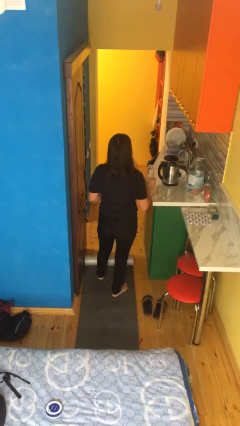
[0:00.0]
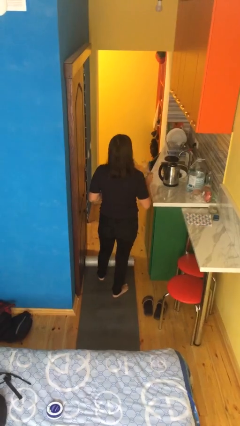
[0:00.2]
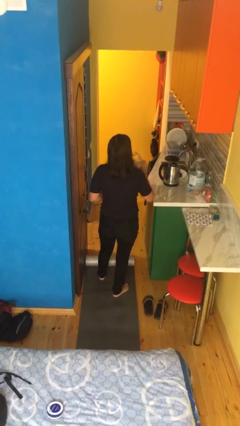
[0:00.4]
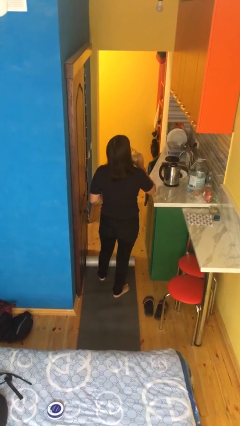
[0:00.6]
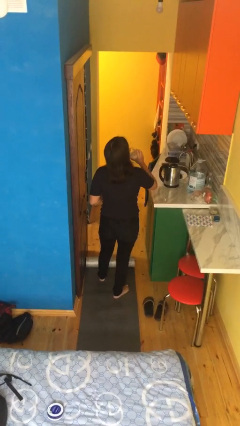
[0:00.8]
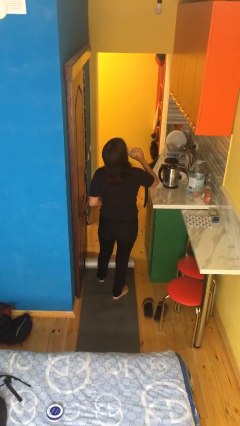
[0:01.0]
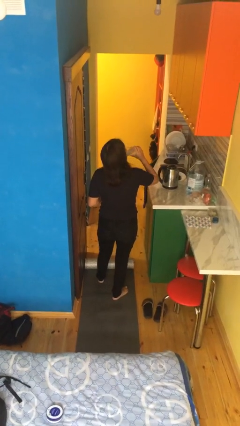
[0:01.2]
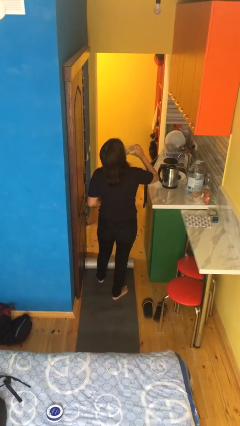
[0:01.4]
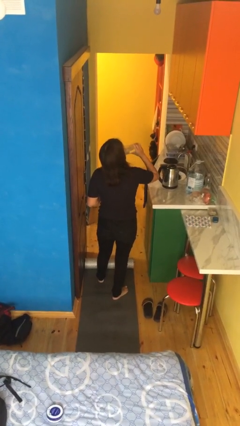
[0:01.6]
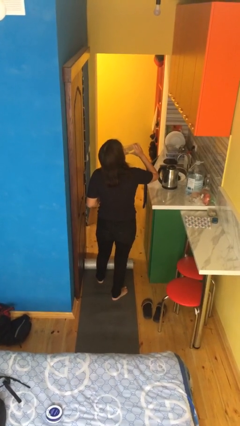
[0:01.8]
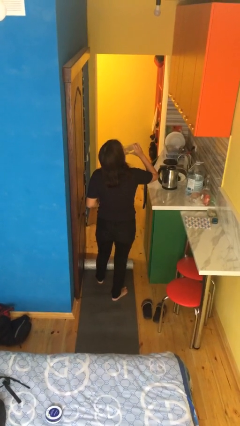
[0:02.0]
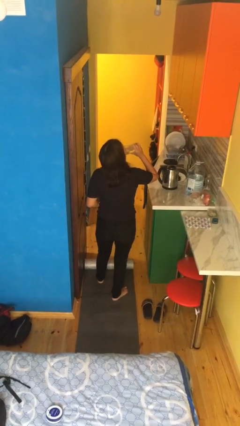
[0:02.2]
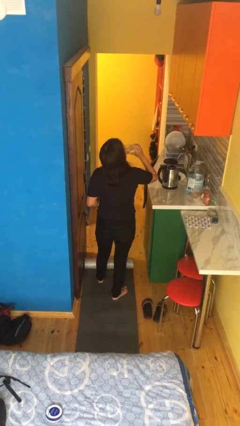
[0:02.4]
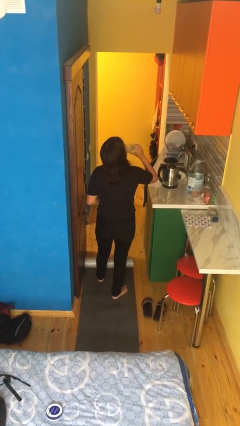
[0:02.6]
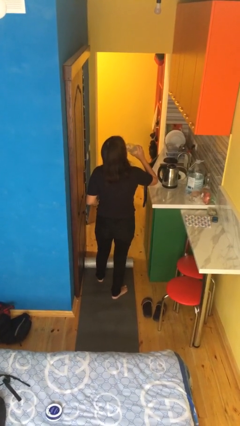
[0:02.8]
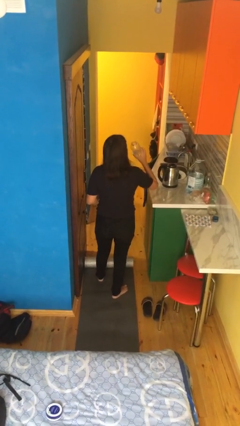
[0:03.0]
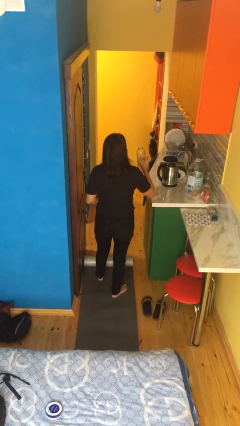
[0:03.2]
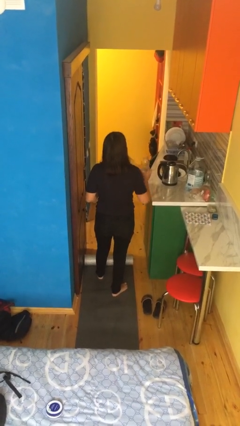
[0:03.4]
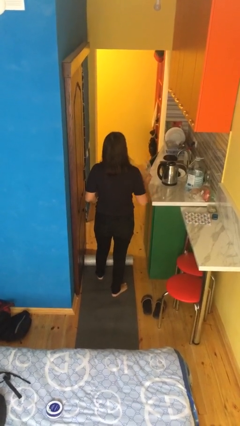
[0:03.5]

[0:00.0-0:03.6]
person drinks from bottle

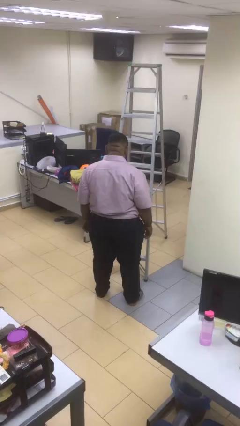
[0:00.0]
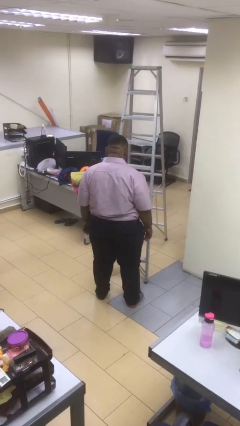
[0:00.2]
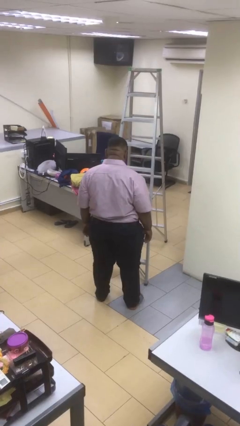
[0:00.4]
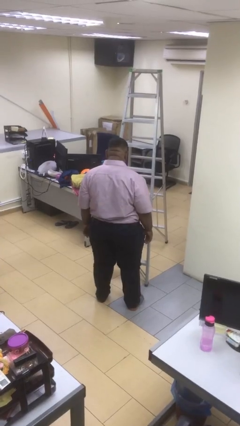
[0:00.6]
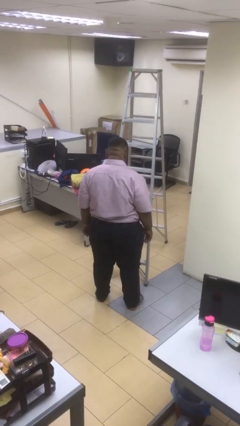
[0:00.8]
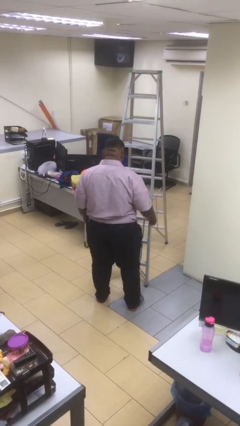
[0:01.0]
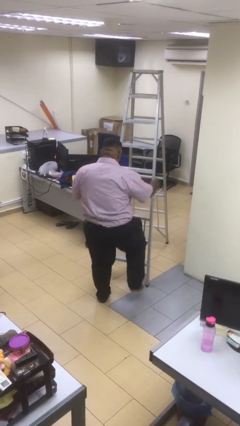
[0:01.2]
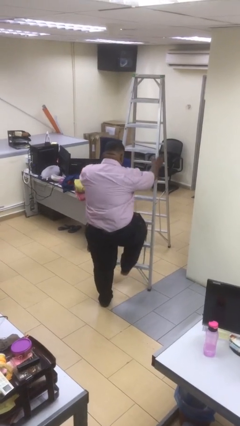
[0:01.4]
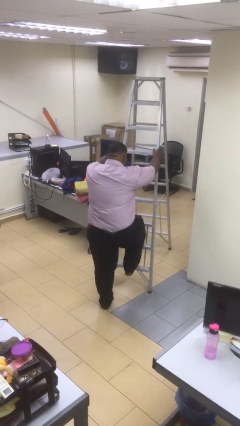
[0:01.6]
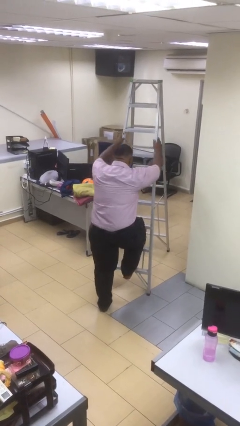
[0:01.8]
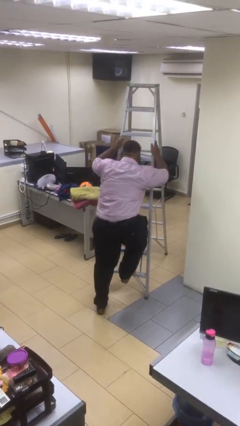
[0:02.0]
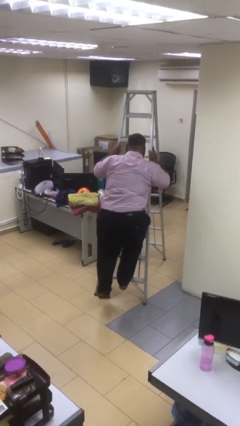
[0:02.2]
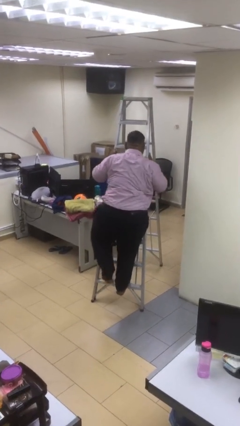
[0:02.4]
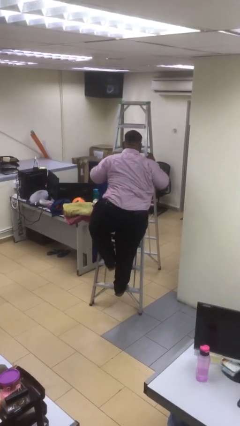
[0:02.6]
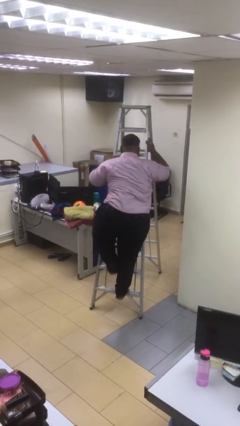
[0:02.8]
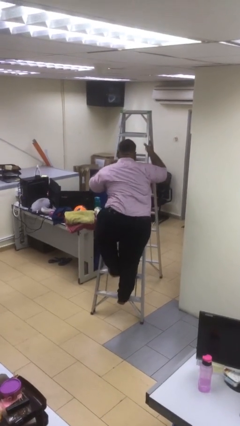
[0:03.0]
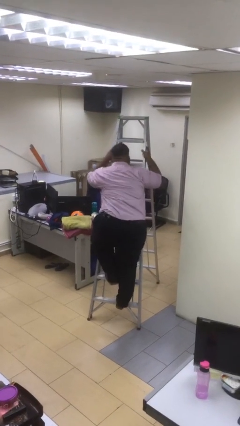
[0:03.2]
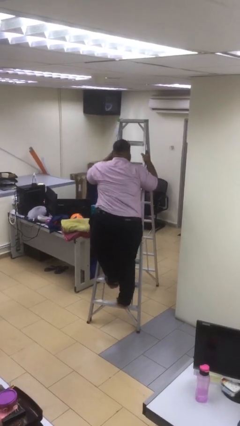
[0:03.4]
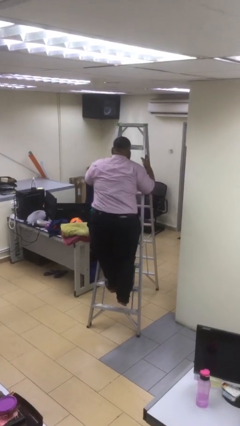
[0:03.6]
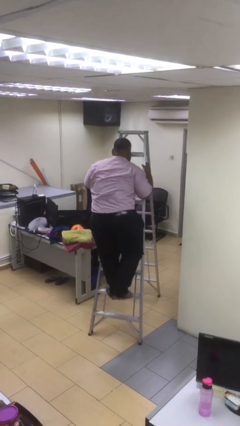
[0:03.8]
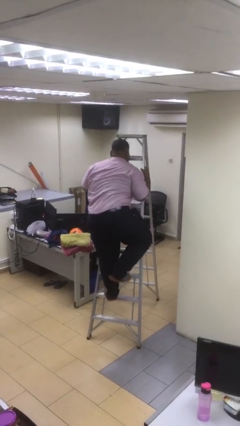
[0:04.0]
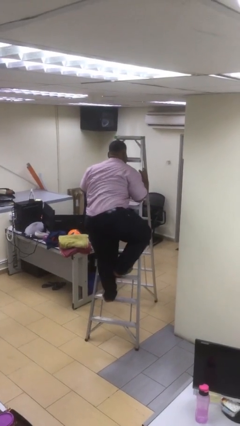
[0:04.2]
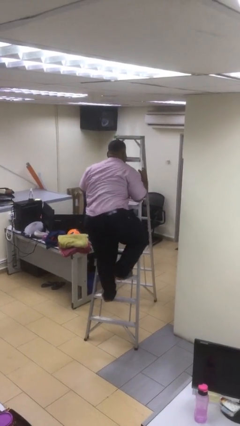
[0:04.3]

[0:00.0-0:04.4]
person climbs up ladder

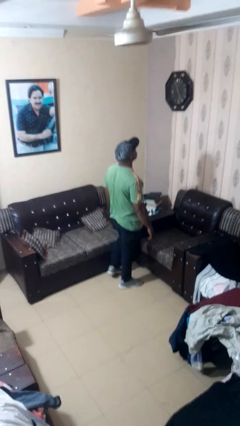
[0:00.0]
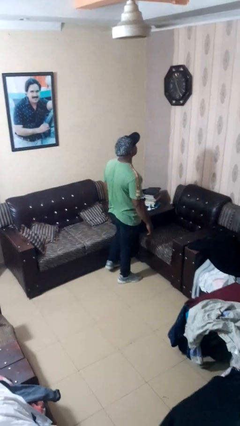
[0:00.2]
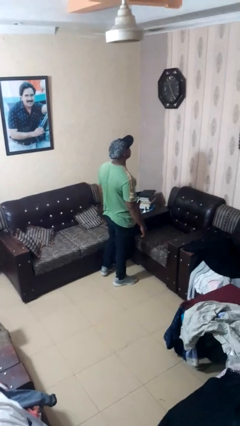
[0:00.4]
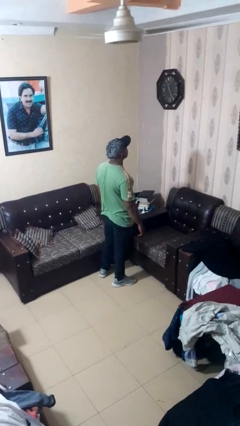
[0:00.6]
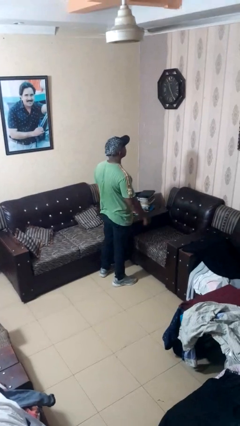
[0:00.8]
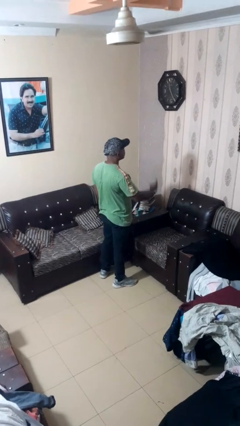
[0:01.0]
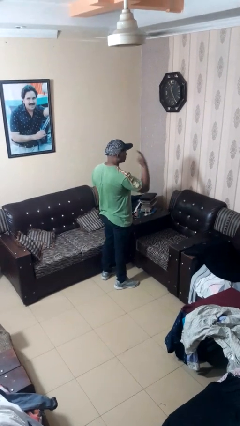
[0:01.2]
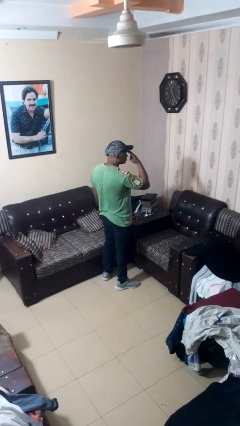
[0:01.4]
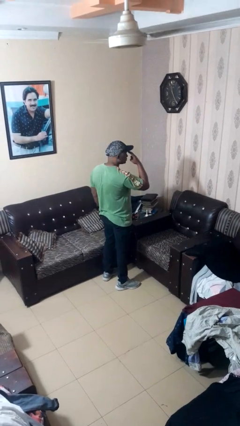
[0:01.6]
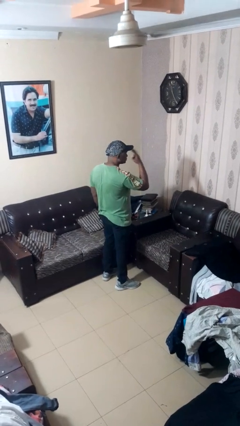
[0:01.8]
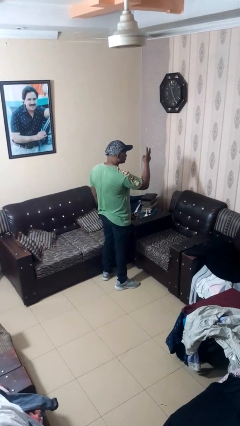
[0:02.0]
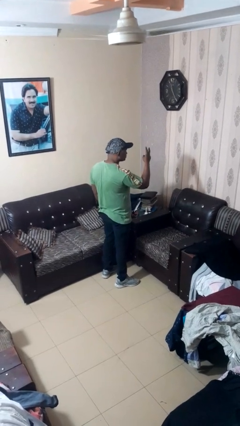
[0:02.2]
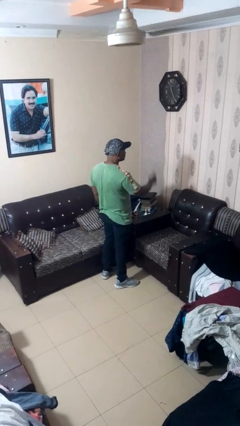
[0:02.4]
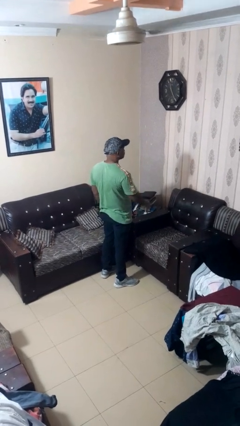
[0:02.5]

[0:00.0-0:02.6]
person gestures watch closely

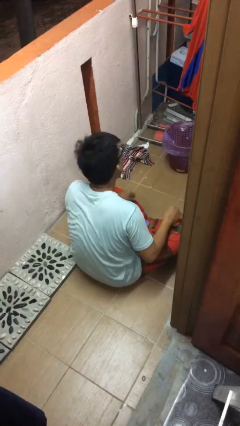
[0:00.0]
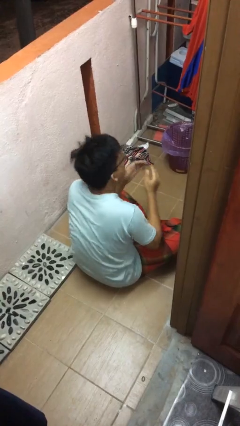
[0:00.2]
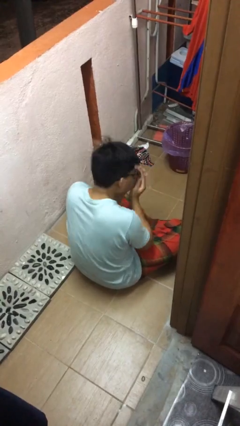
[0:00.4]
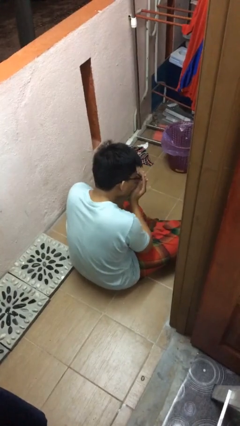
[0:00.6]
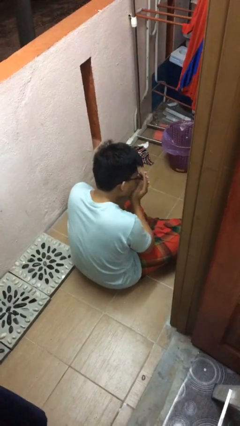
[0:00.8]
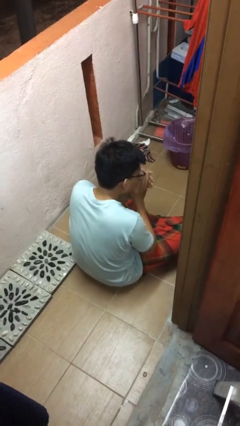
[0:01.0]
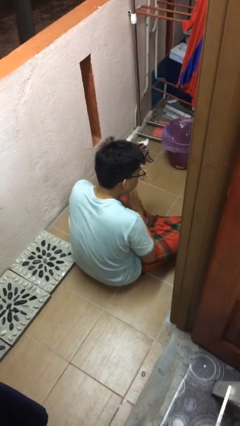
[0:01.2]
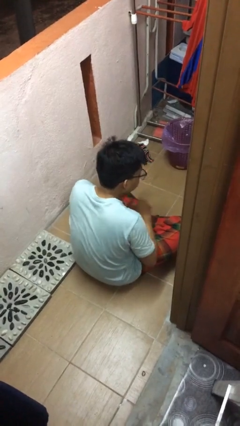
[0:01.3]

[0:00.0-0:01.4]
person sneezes into hand

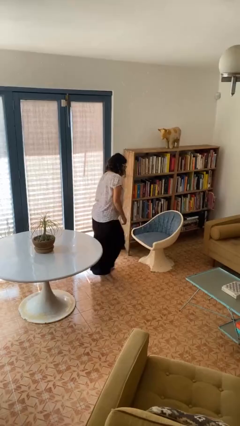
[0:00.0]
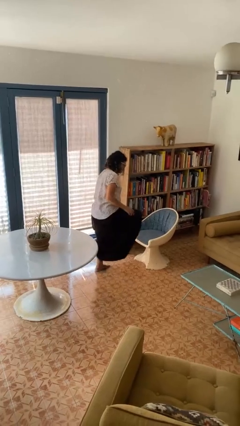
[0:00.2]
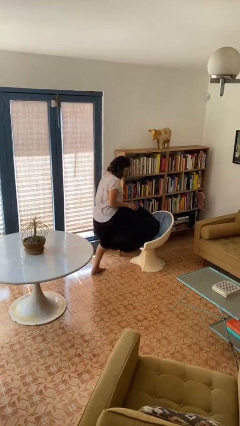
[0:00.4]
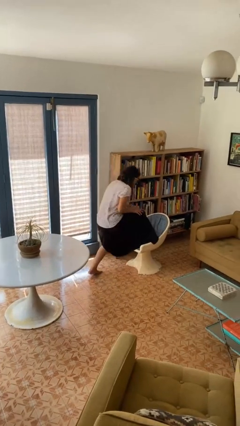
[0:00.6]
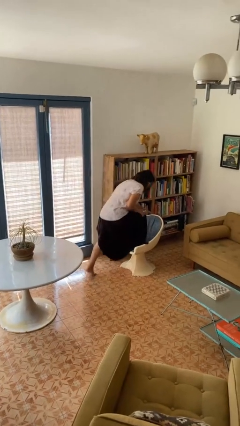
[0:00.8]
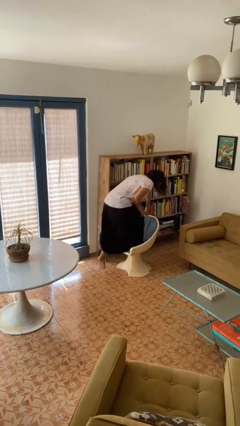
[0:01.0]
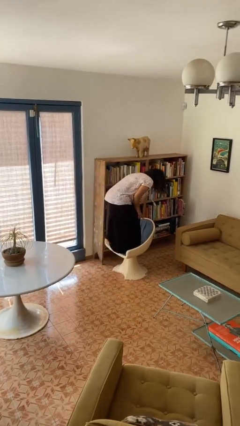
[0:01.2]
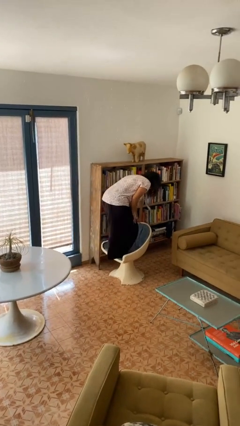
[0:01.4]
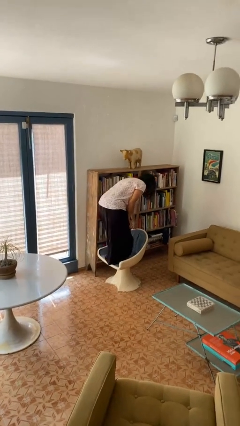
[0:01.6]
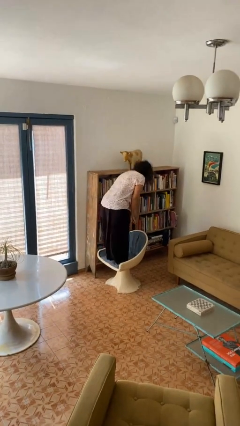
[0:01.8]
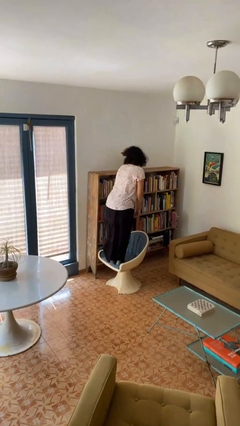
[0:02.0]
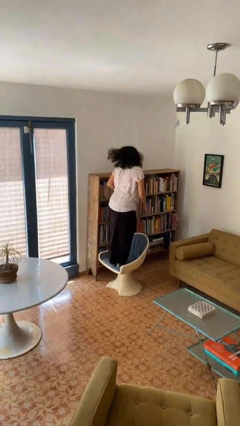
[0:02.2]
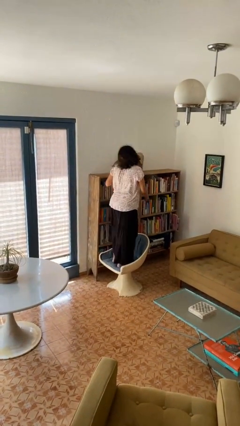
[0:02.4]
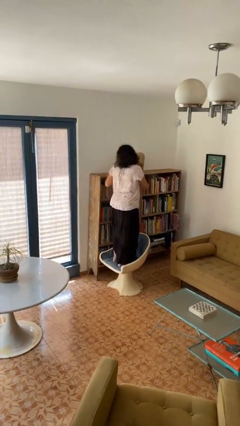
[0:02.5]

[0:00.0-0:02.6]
person climbs on chair

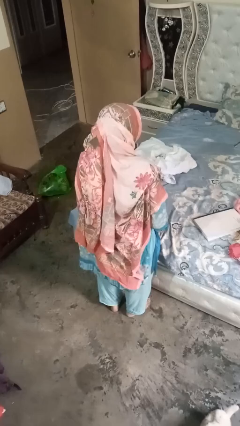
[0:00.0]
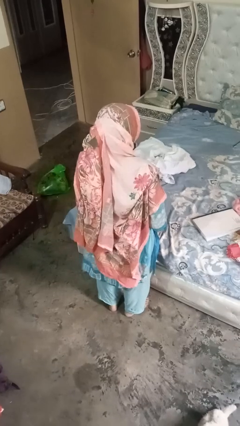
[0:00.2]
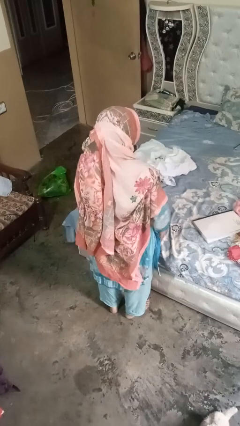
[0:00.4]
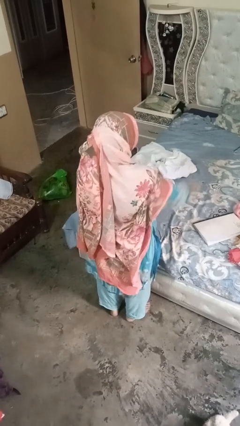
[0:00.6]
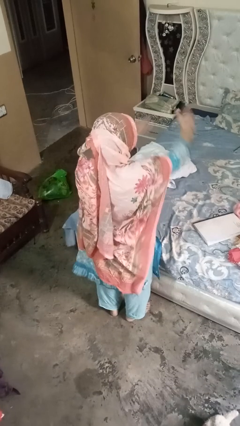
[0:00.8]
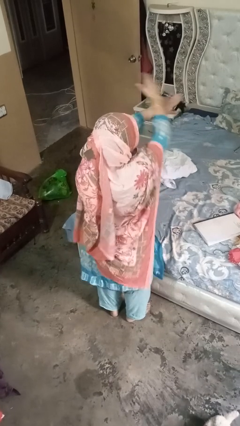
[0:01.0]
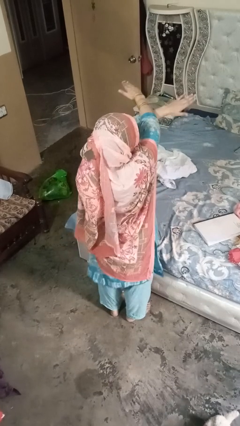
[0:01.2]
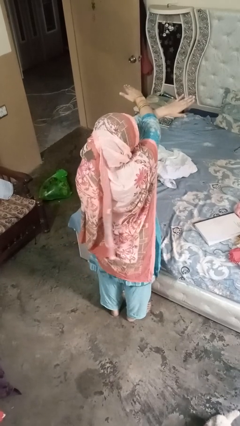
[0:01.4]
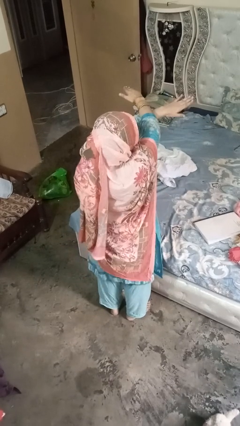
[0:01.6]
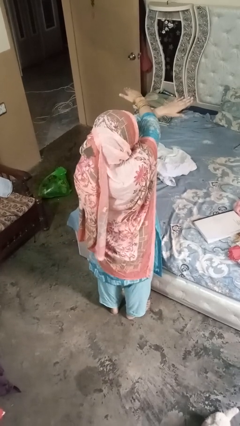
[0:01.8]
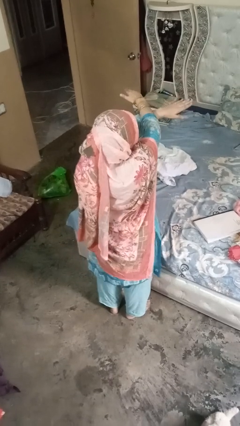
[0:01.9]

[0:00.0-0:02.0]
person gestures arms x

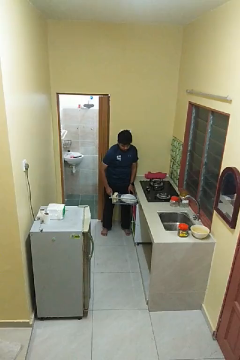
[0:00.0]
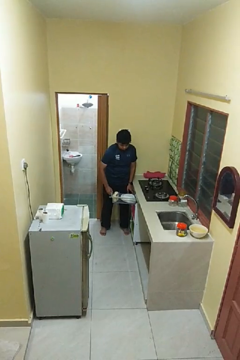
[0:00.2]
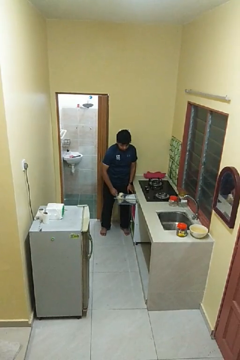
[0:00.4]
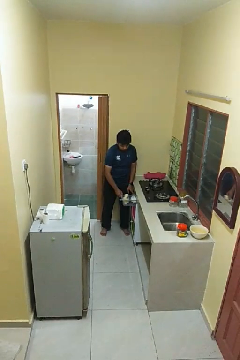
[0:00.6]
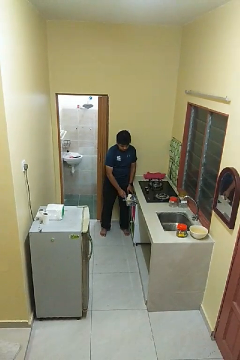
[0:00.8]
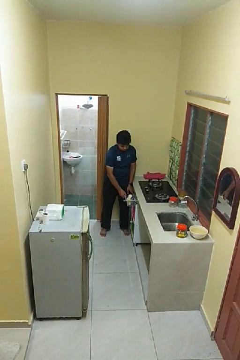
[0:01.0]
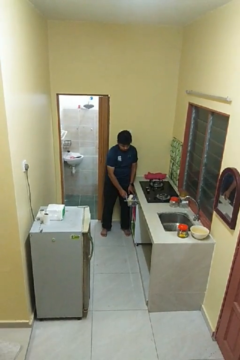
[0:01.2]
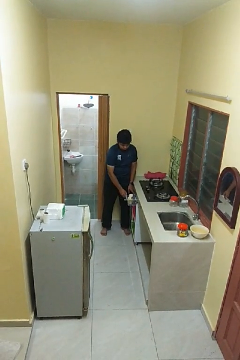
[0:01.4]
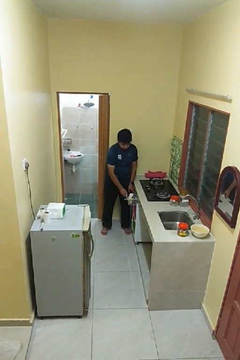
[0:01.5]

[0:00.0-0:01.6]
person closes kitchen drawer
